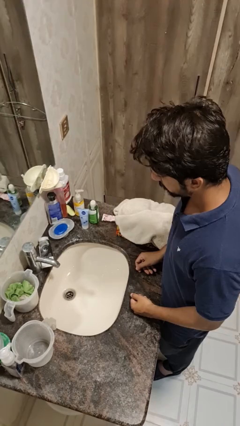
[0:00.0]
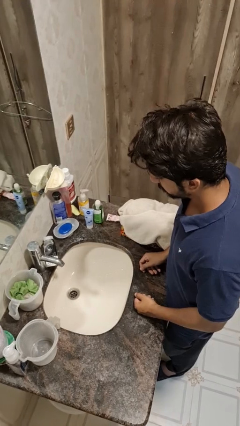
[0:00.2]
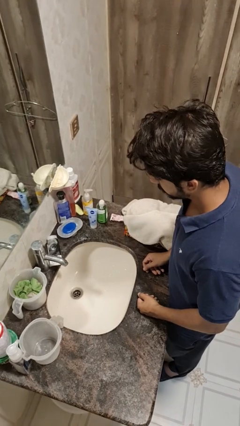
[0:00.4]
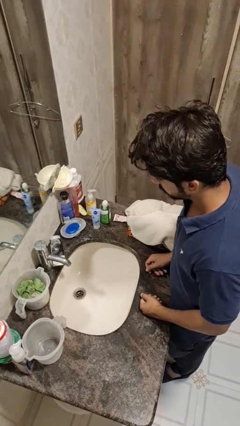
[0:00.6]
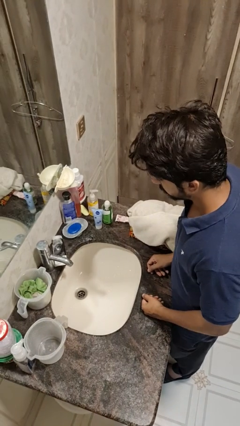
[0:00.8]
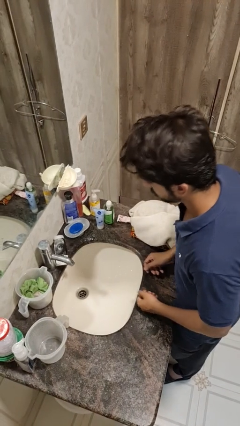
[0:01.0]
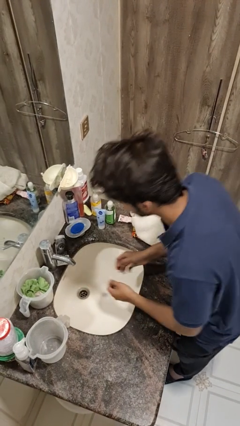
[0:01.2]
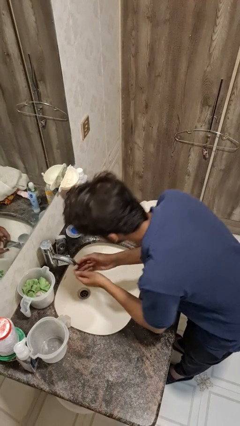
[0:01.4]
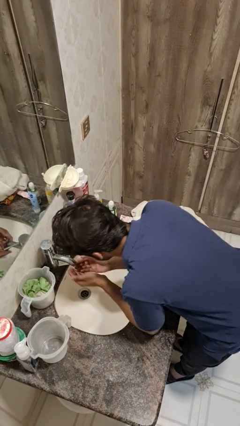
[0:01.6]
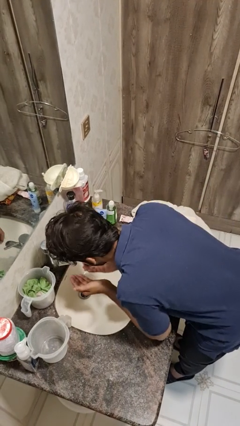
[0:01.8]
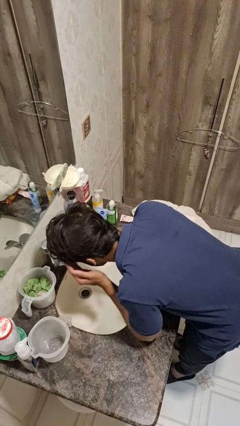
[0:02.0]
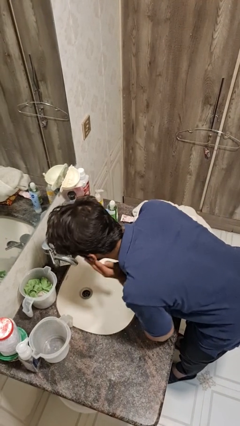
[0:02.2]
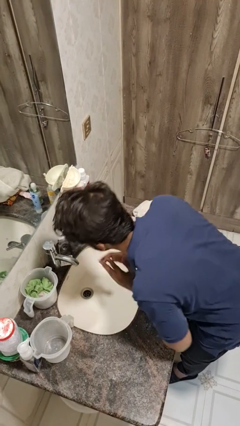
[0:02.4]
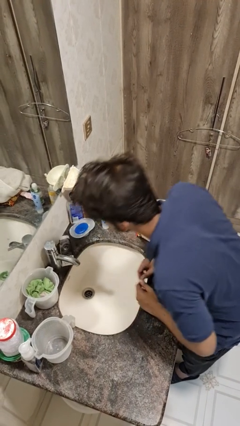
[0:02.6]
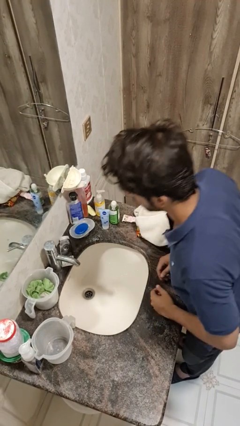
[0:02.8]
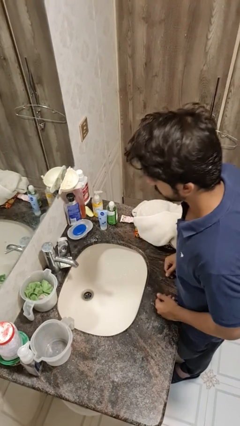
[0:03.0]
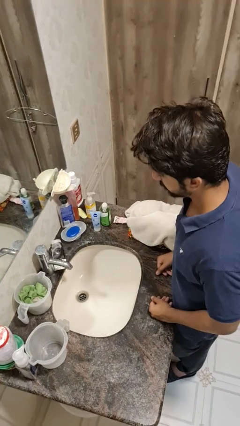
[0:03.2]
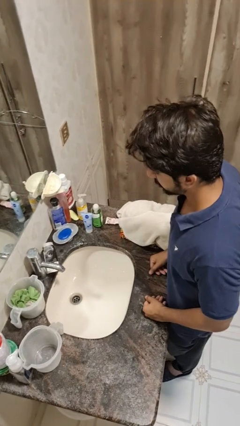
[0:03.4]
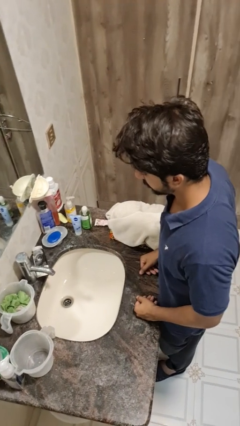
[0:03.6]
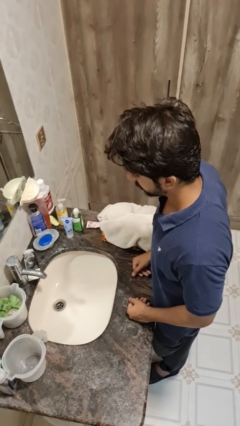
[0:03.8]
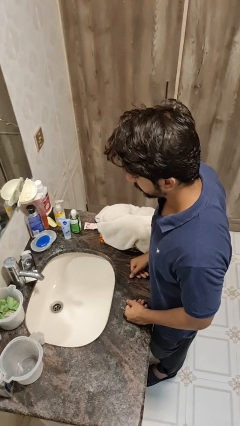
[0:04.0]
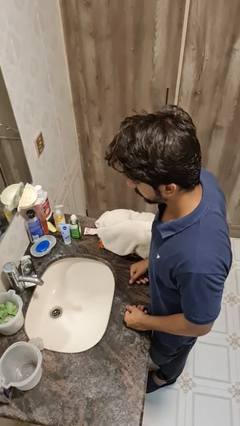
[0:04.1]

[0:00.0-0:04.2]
person washes face

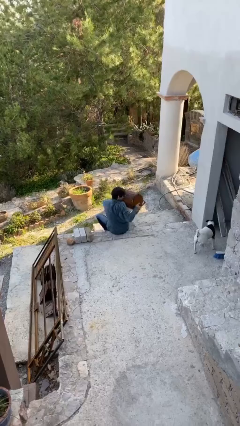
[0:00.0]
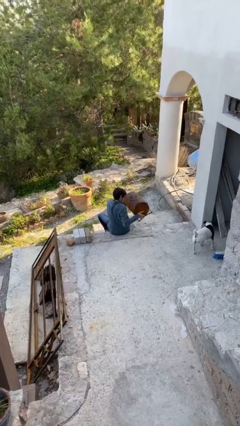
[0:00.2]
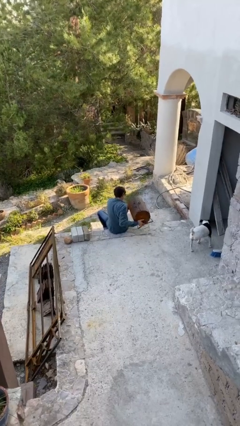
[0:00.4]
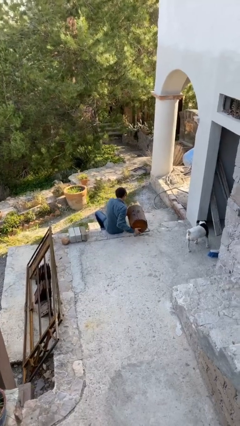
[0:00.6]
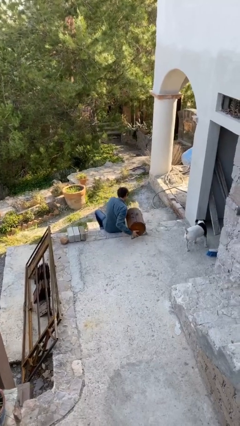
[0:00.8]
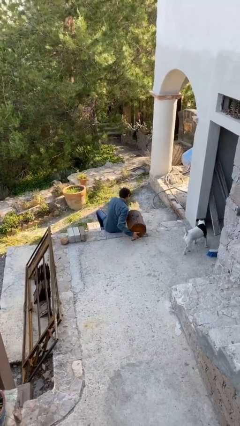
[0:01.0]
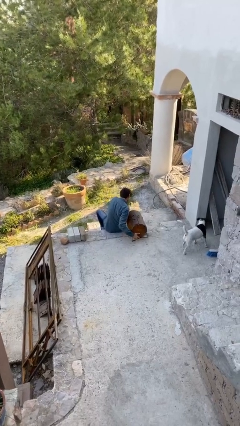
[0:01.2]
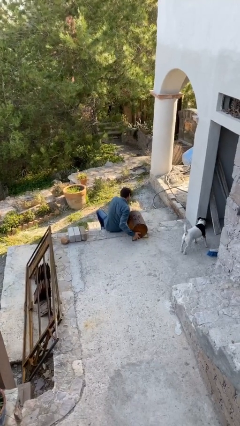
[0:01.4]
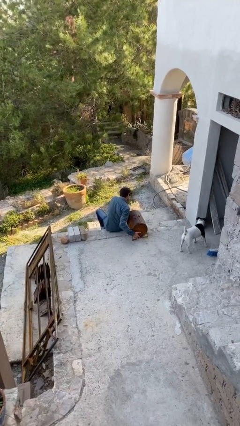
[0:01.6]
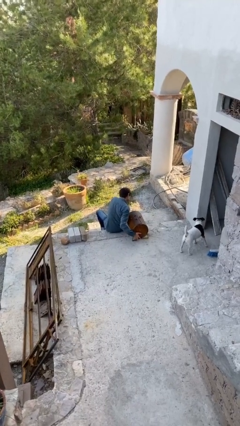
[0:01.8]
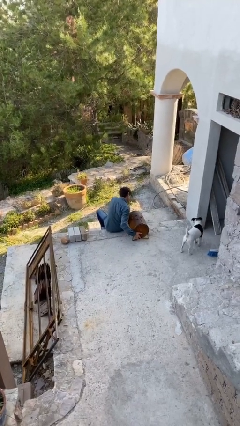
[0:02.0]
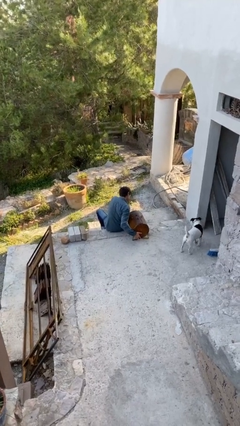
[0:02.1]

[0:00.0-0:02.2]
person puts down object on floor

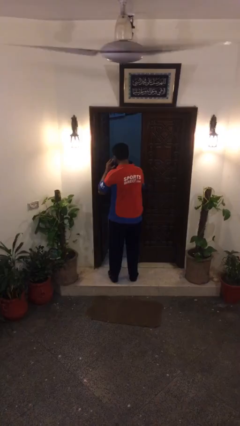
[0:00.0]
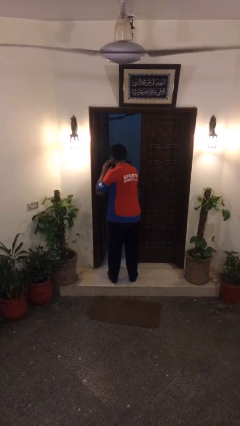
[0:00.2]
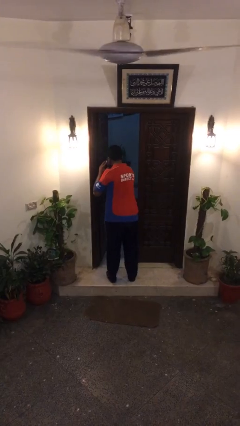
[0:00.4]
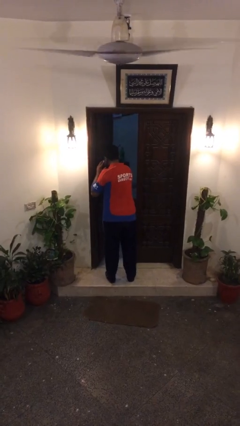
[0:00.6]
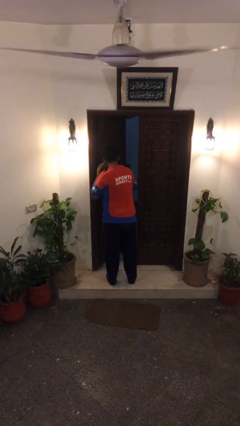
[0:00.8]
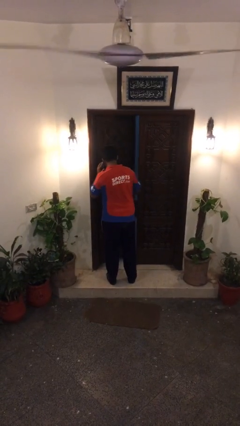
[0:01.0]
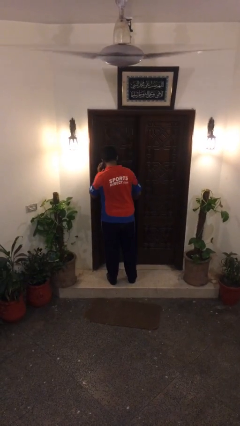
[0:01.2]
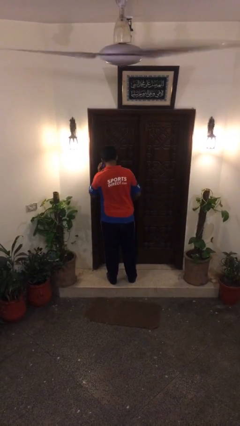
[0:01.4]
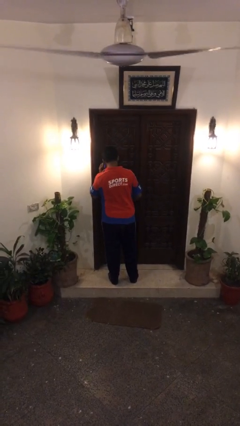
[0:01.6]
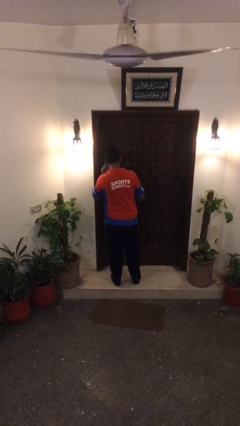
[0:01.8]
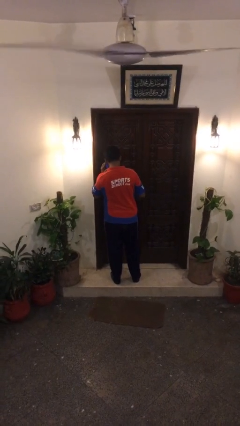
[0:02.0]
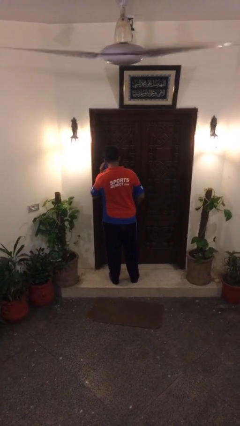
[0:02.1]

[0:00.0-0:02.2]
person closes facility door

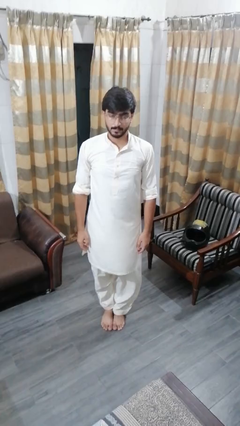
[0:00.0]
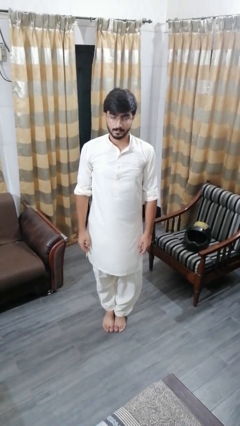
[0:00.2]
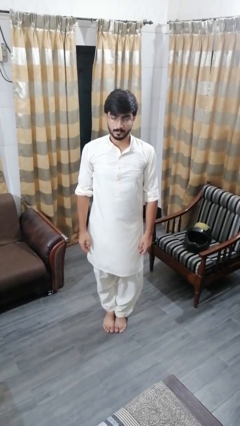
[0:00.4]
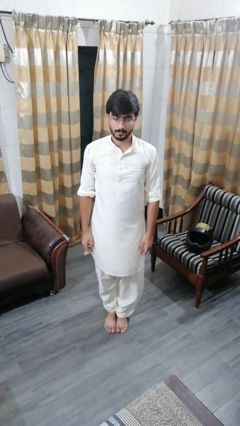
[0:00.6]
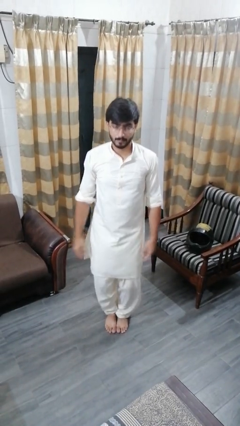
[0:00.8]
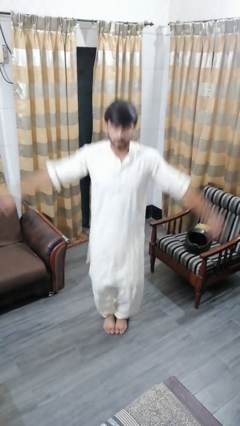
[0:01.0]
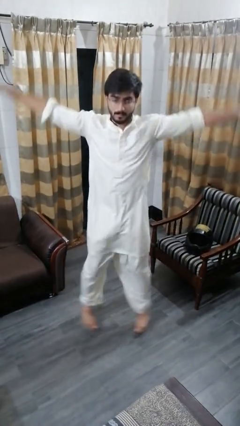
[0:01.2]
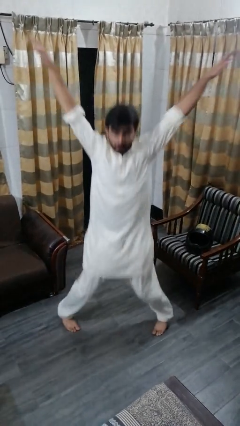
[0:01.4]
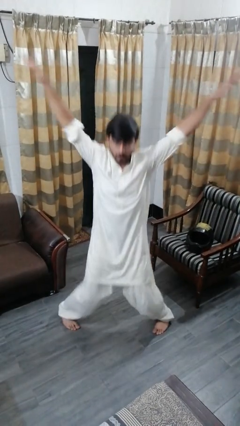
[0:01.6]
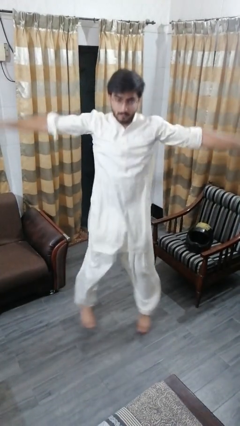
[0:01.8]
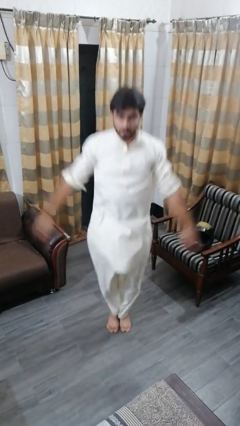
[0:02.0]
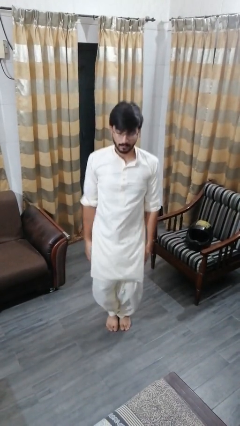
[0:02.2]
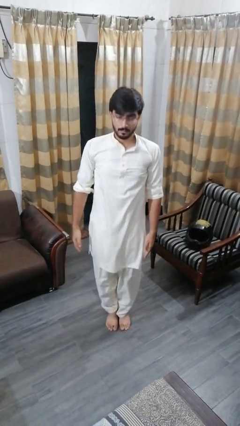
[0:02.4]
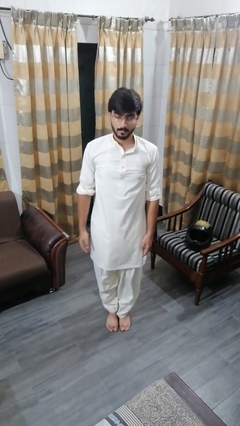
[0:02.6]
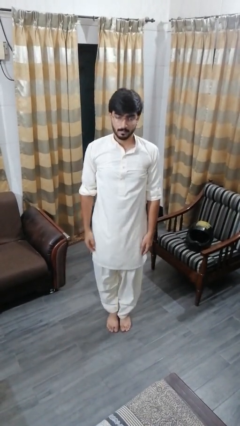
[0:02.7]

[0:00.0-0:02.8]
person exercises with jumping jacks

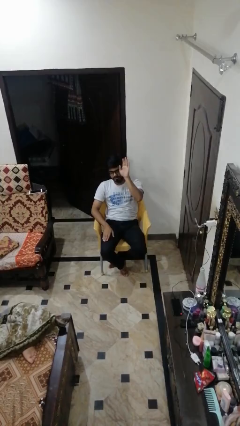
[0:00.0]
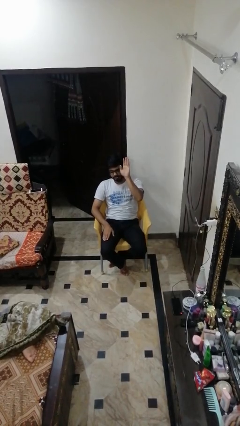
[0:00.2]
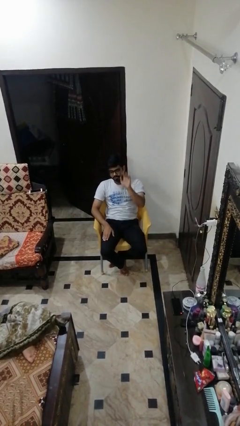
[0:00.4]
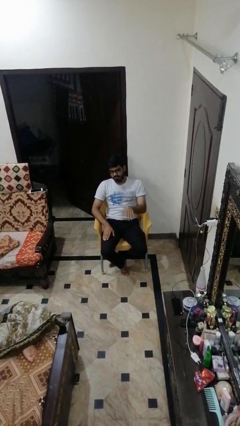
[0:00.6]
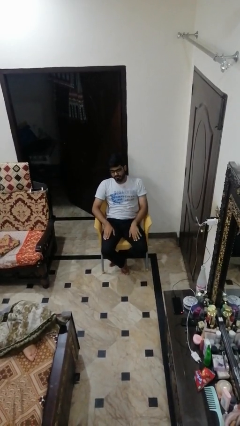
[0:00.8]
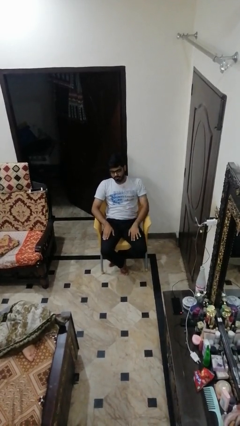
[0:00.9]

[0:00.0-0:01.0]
person gestures lower hand

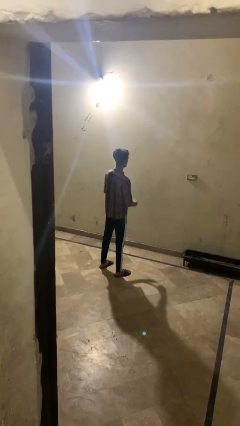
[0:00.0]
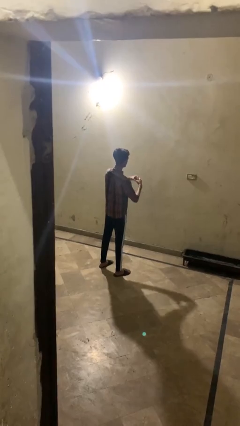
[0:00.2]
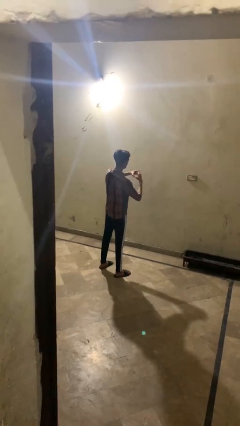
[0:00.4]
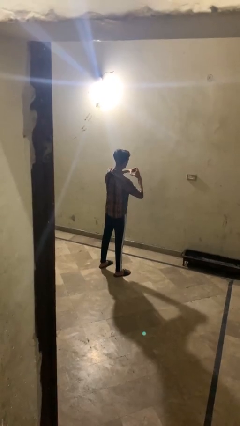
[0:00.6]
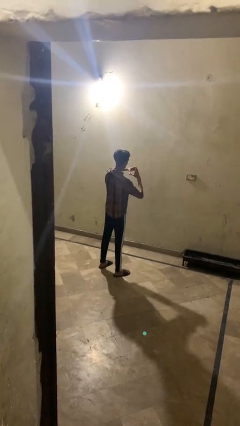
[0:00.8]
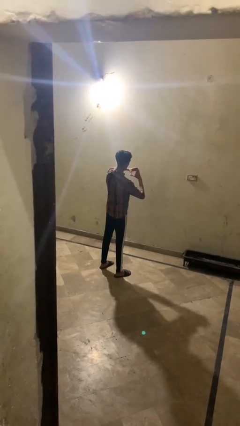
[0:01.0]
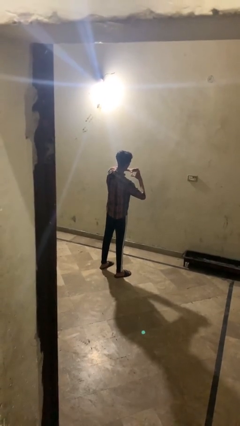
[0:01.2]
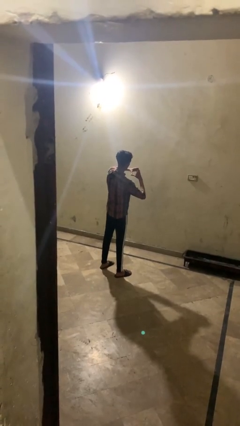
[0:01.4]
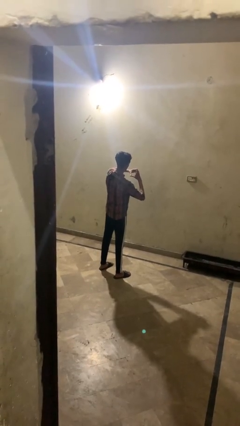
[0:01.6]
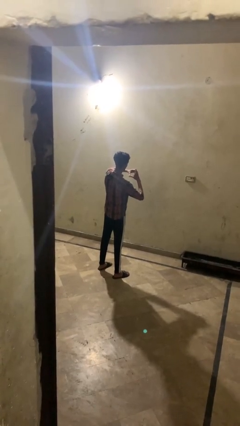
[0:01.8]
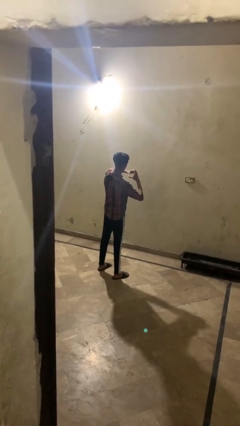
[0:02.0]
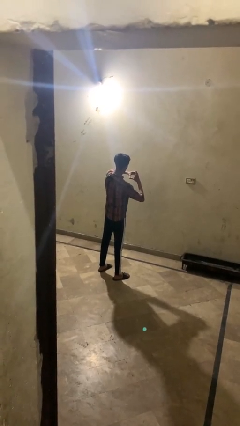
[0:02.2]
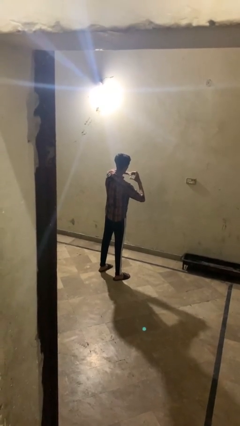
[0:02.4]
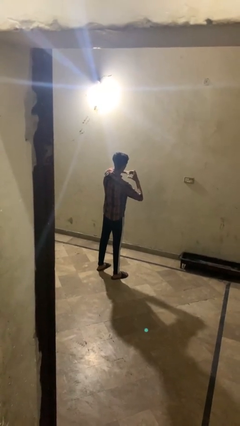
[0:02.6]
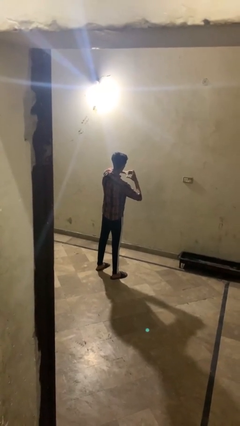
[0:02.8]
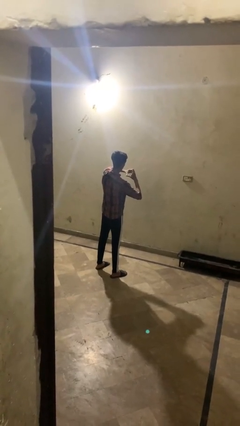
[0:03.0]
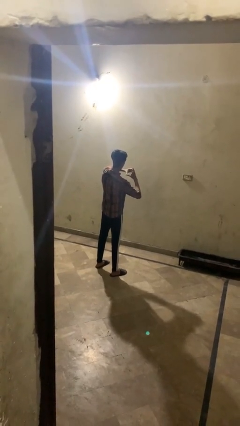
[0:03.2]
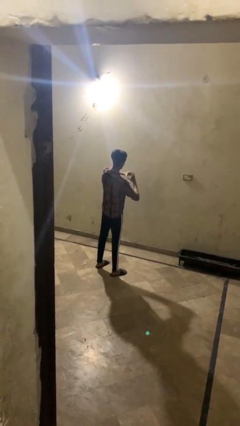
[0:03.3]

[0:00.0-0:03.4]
person gestures heart

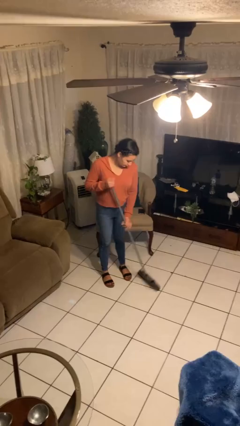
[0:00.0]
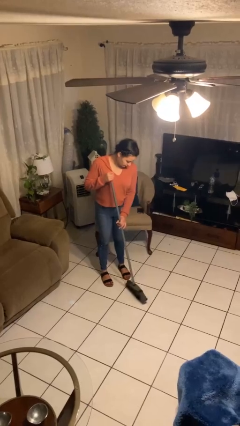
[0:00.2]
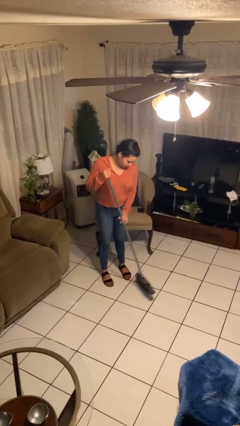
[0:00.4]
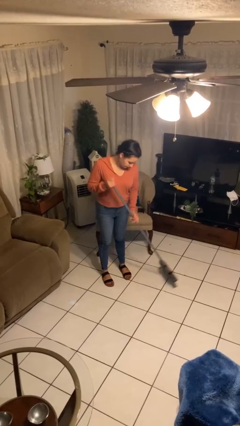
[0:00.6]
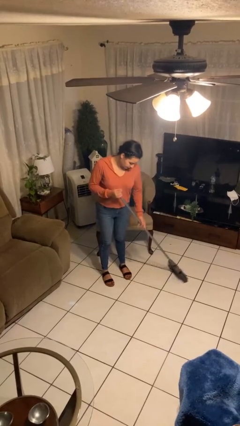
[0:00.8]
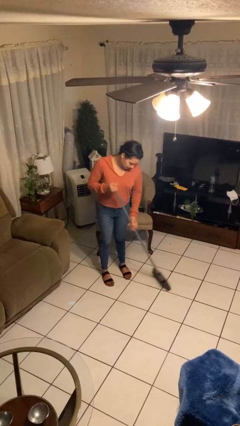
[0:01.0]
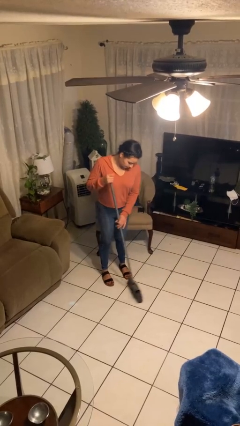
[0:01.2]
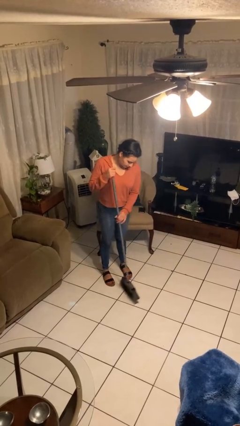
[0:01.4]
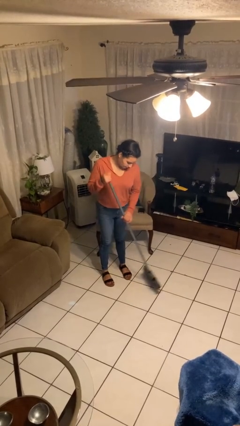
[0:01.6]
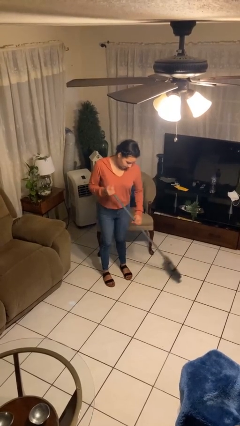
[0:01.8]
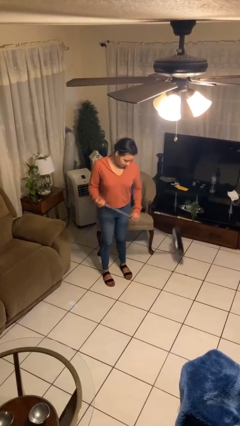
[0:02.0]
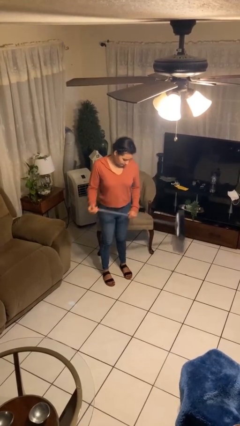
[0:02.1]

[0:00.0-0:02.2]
person sweeps floor
